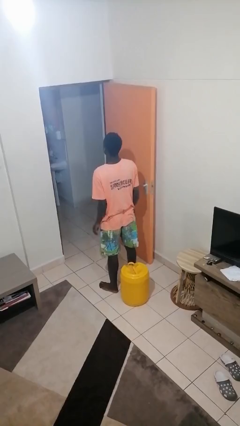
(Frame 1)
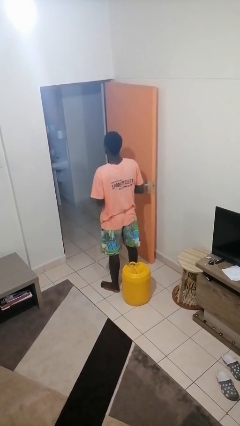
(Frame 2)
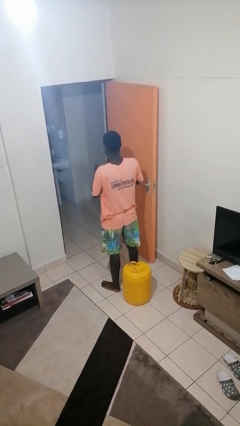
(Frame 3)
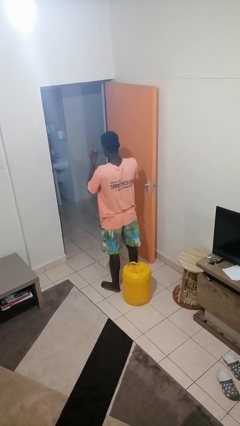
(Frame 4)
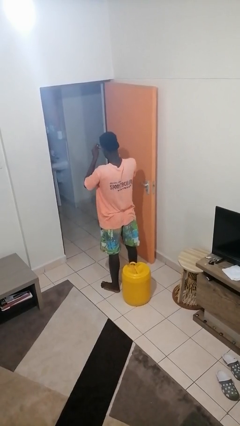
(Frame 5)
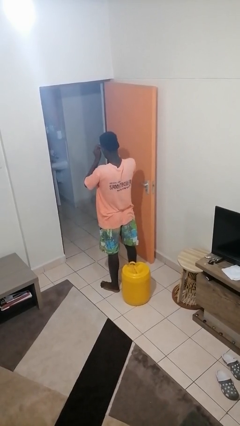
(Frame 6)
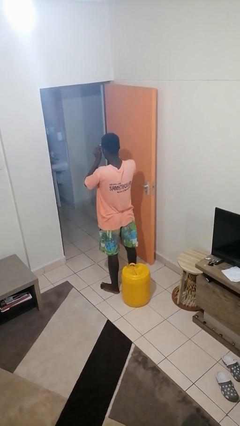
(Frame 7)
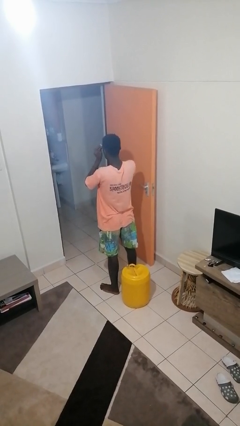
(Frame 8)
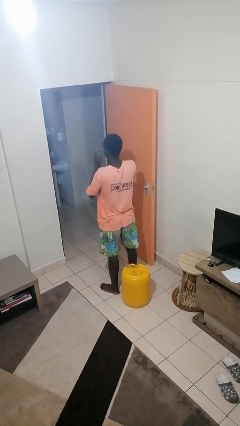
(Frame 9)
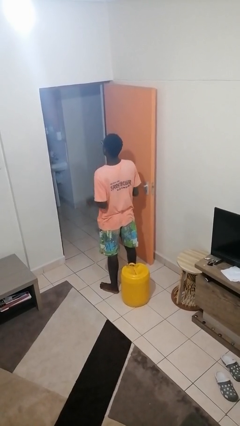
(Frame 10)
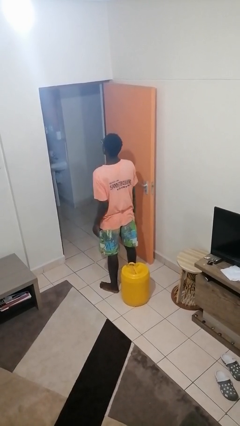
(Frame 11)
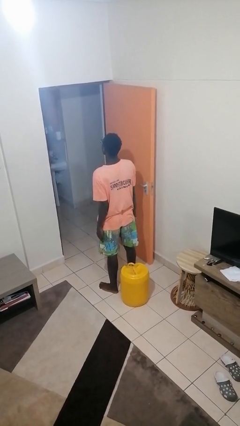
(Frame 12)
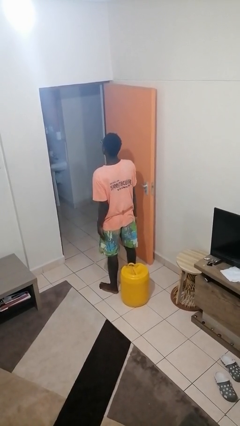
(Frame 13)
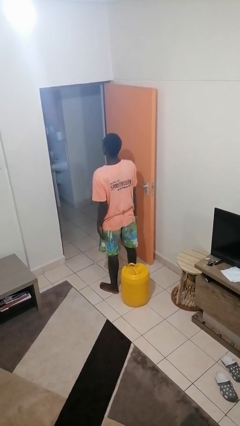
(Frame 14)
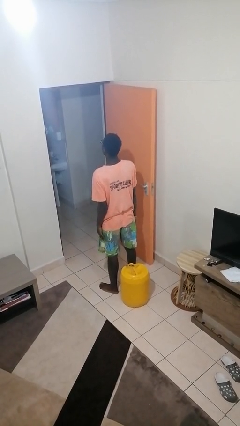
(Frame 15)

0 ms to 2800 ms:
person puts on glasses

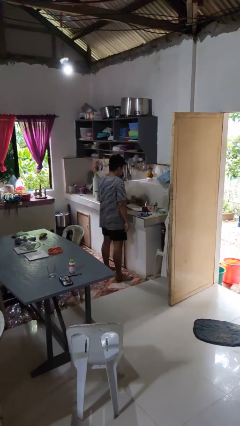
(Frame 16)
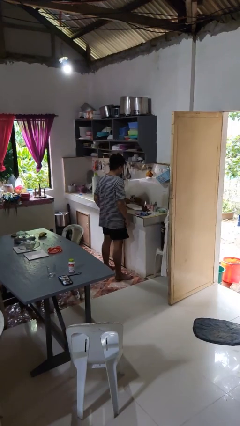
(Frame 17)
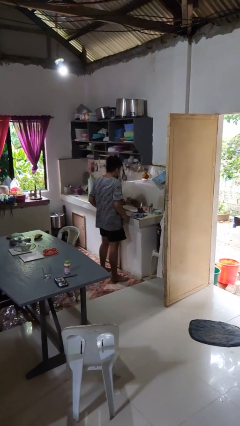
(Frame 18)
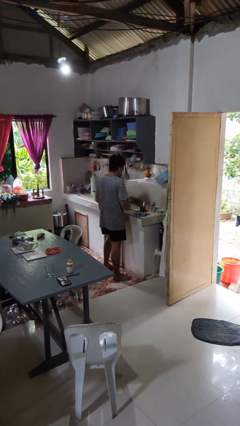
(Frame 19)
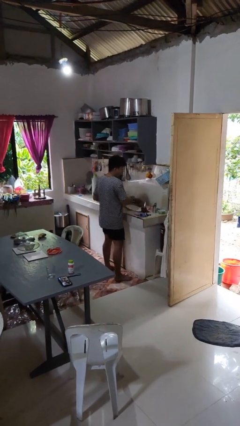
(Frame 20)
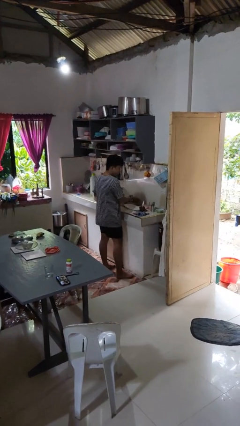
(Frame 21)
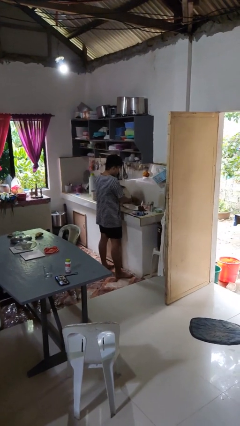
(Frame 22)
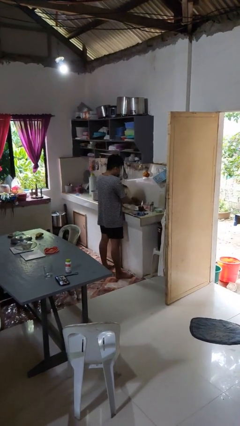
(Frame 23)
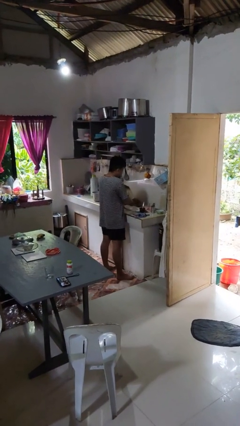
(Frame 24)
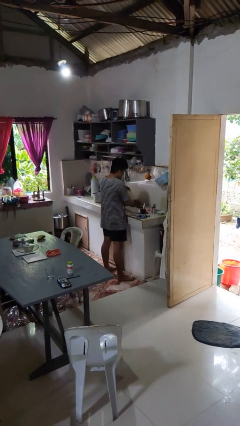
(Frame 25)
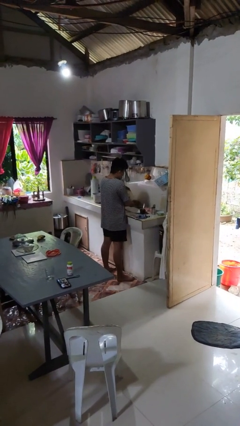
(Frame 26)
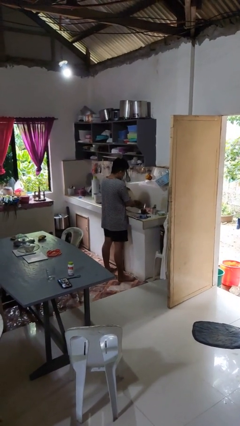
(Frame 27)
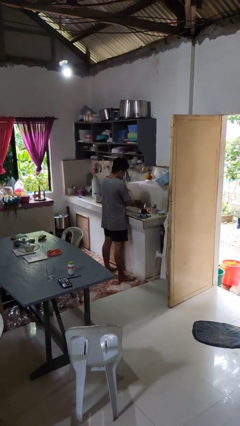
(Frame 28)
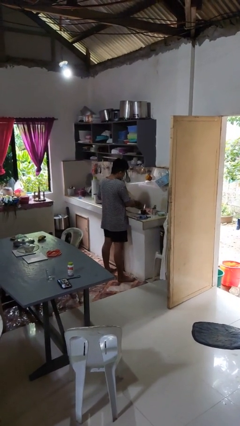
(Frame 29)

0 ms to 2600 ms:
person washes hands

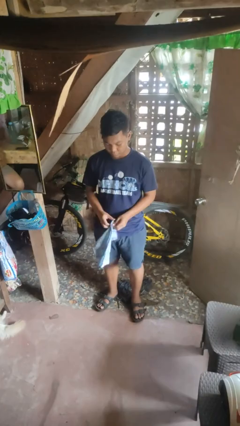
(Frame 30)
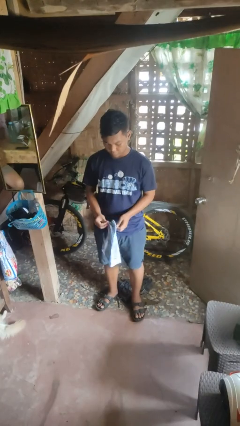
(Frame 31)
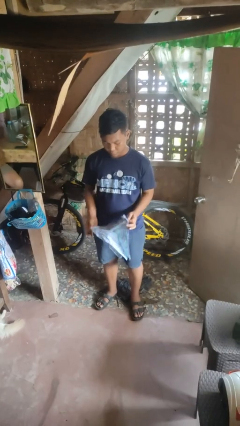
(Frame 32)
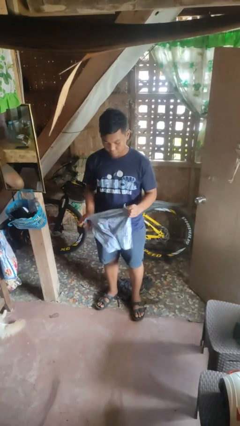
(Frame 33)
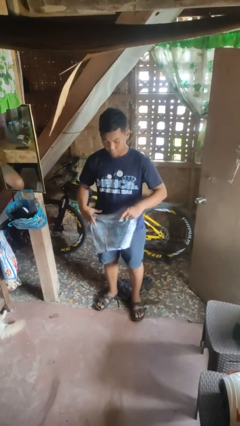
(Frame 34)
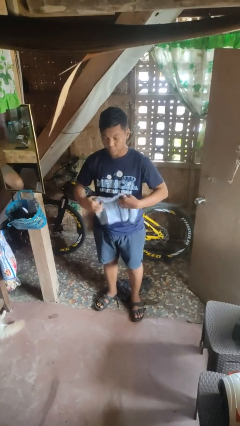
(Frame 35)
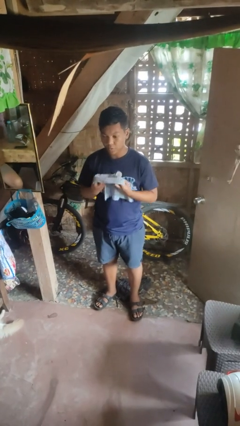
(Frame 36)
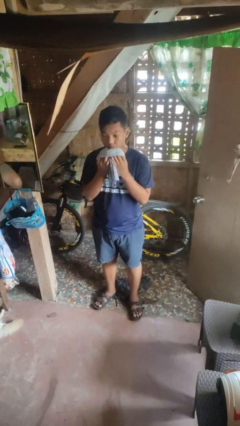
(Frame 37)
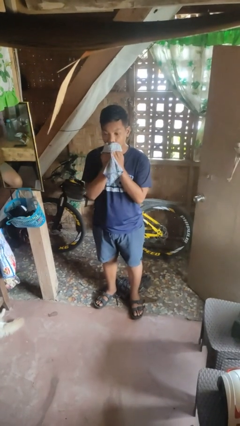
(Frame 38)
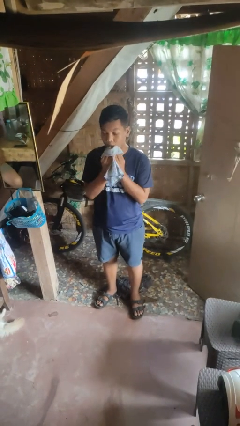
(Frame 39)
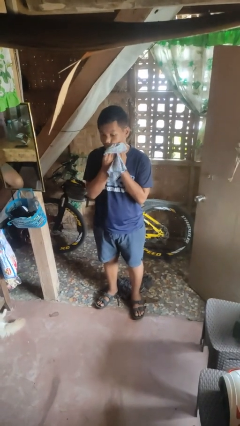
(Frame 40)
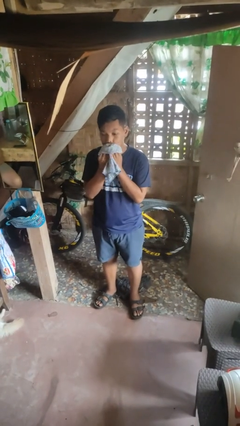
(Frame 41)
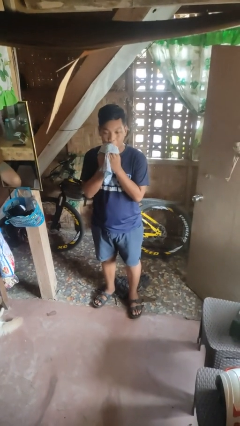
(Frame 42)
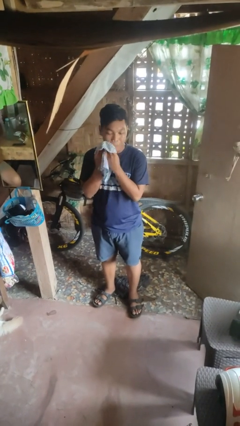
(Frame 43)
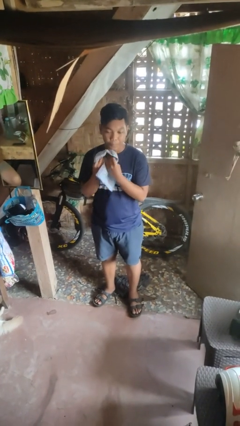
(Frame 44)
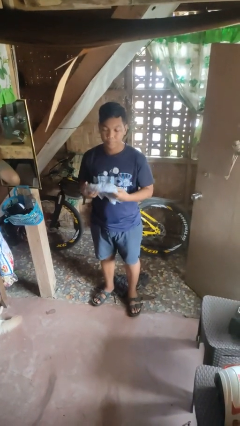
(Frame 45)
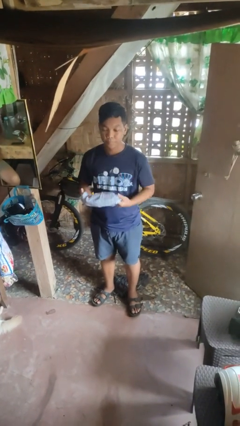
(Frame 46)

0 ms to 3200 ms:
person wipes mouth with napkin

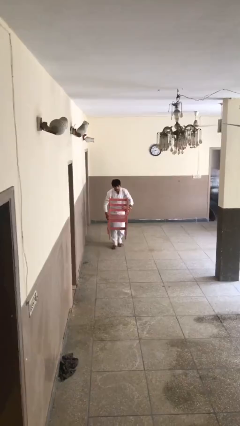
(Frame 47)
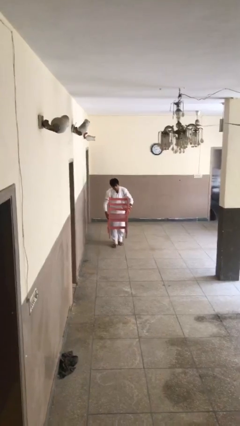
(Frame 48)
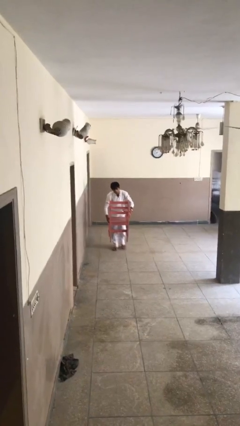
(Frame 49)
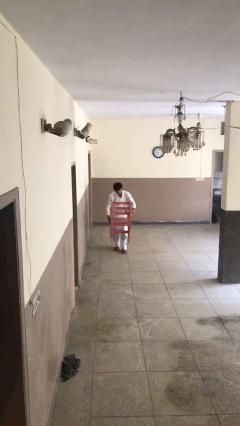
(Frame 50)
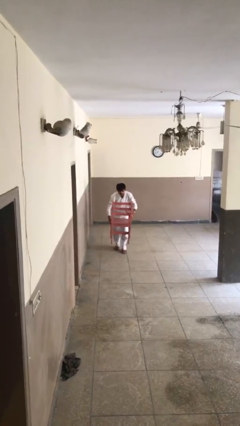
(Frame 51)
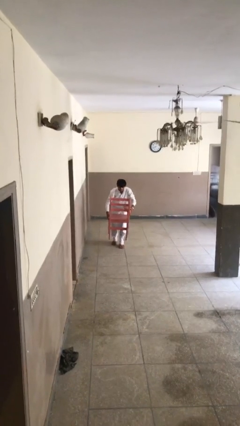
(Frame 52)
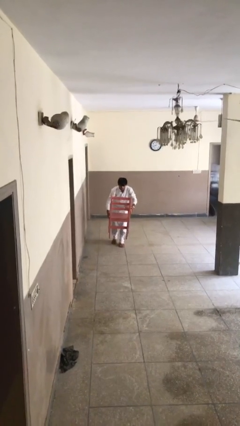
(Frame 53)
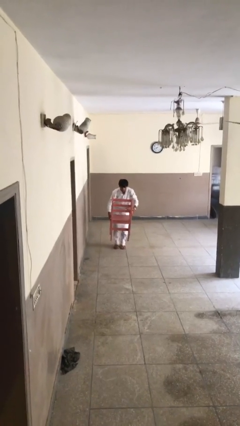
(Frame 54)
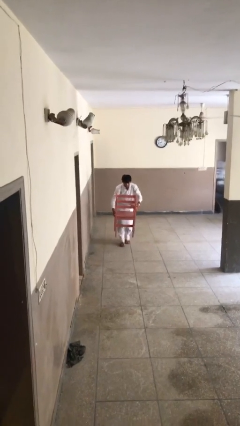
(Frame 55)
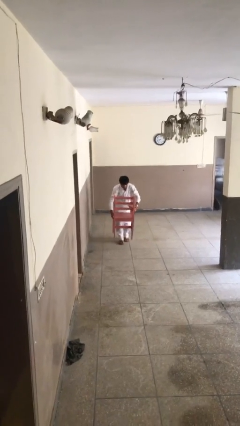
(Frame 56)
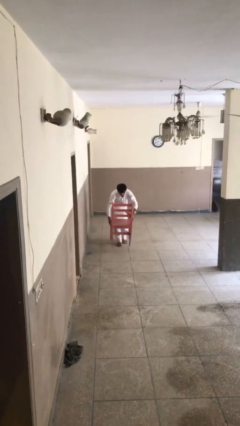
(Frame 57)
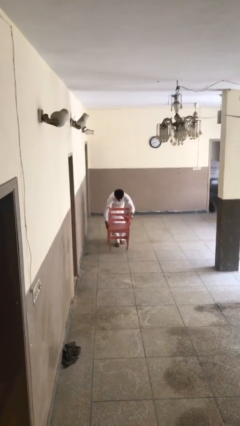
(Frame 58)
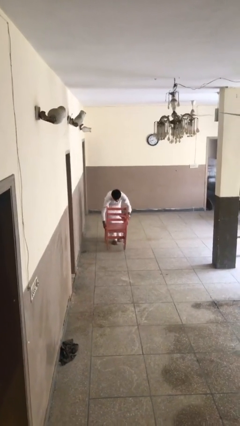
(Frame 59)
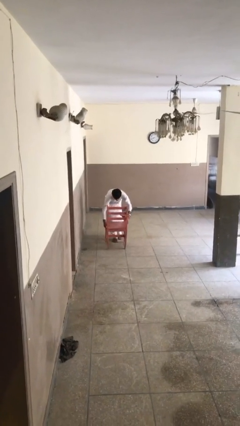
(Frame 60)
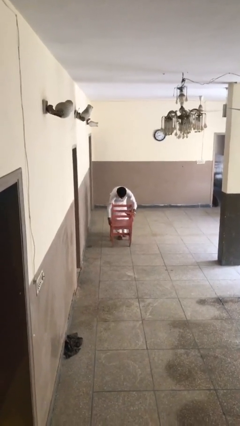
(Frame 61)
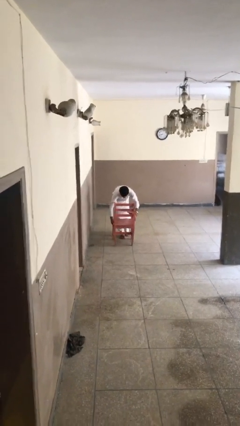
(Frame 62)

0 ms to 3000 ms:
person puts down object on floor

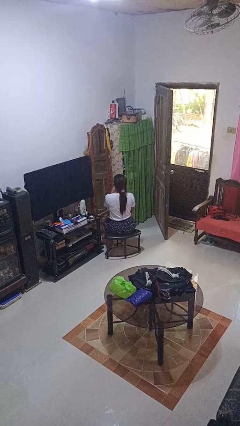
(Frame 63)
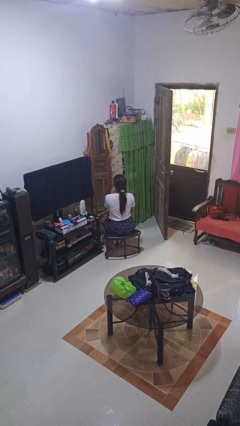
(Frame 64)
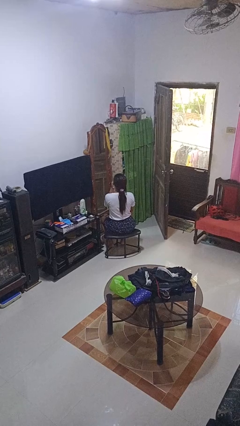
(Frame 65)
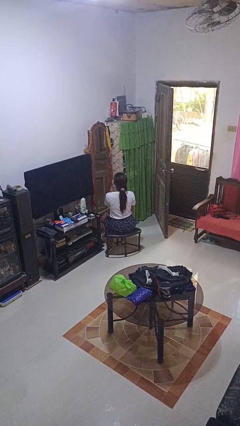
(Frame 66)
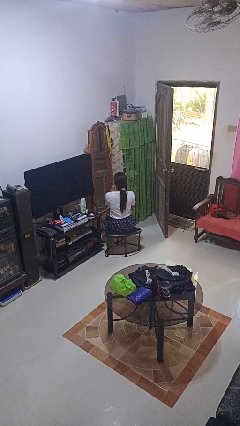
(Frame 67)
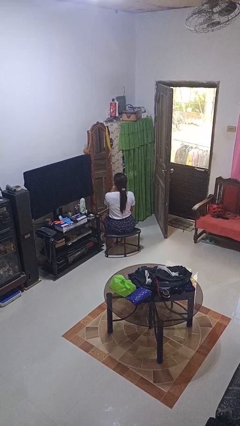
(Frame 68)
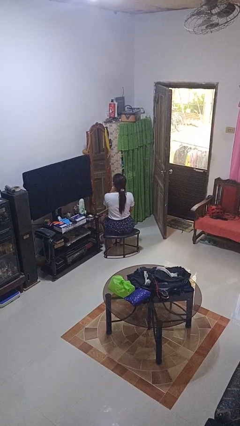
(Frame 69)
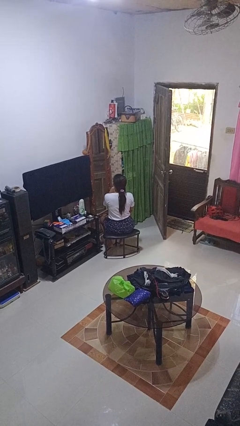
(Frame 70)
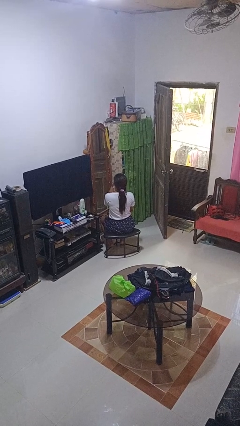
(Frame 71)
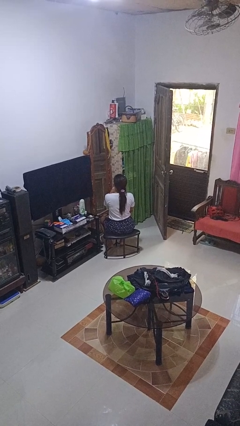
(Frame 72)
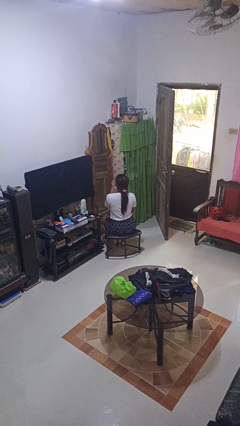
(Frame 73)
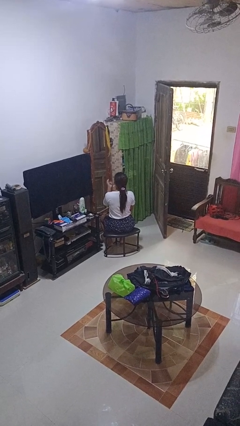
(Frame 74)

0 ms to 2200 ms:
person applies lip makeup

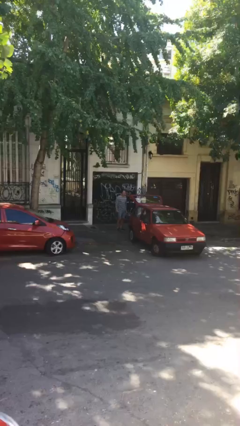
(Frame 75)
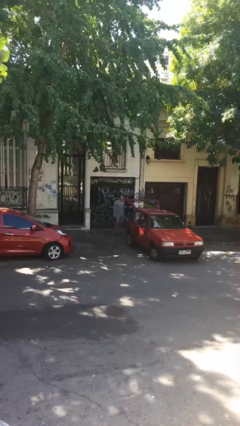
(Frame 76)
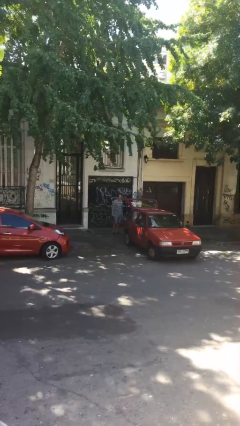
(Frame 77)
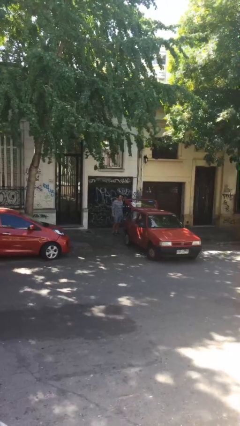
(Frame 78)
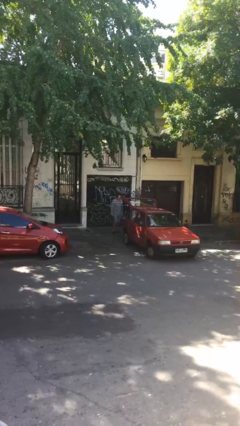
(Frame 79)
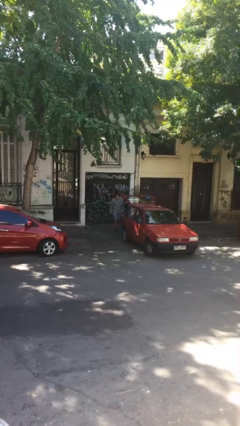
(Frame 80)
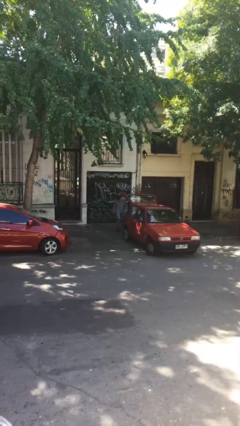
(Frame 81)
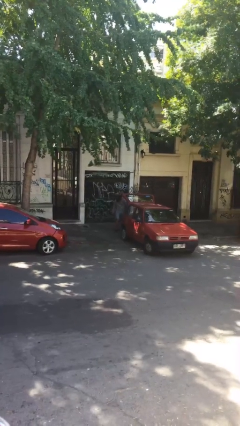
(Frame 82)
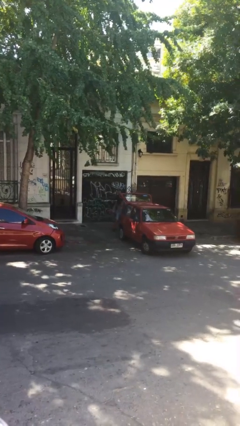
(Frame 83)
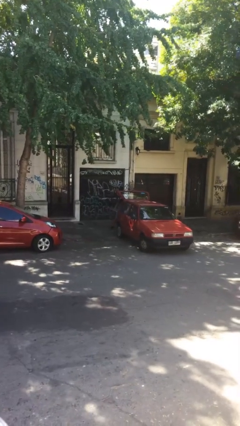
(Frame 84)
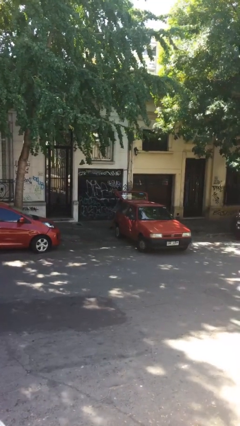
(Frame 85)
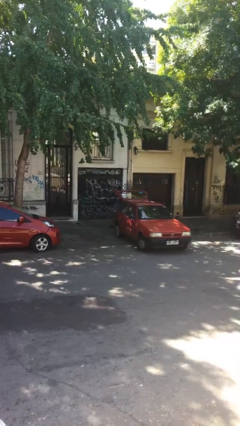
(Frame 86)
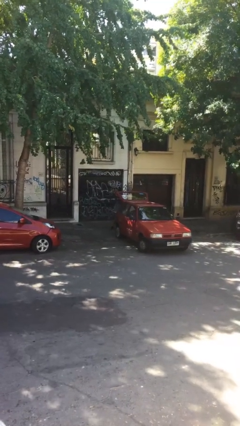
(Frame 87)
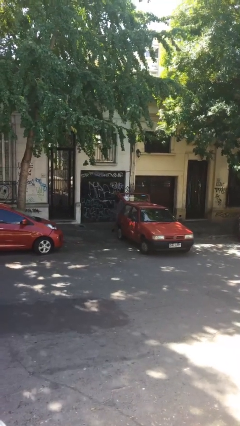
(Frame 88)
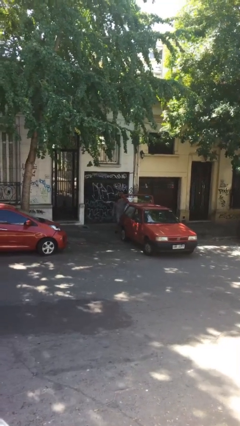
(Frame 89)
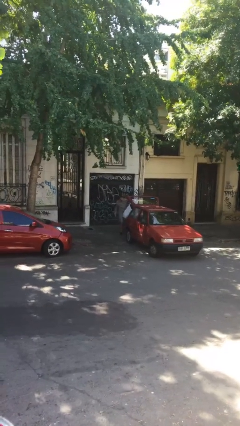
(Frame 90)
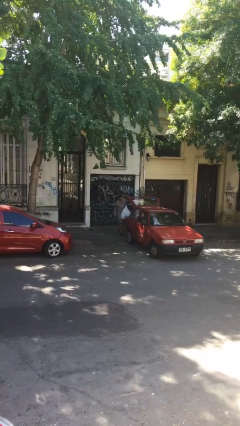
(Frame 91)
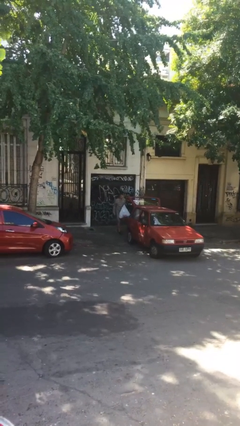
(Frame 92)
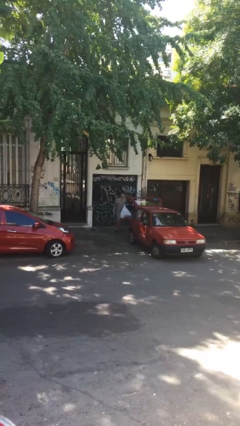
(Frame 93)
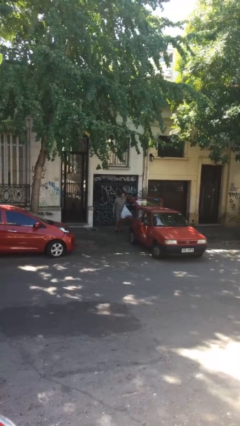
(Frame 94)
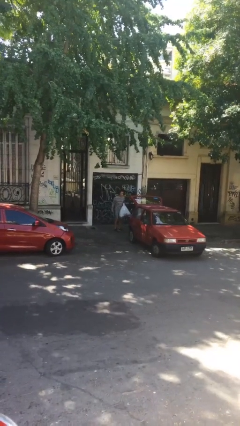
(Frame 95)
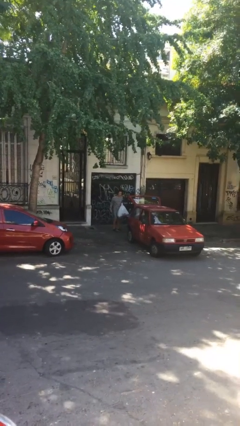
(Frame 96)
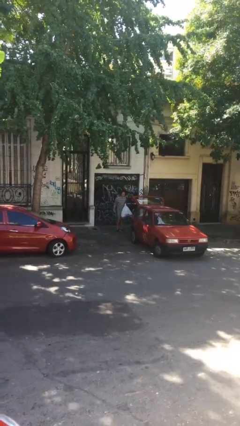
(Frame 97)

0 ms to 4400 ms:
person unloads car
